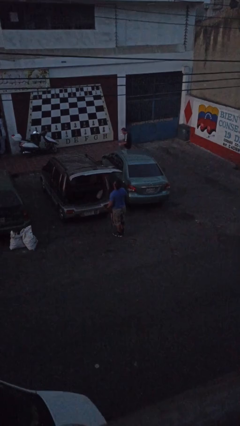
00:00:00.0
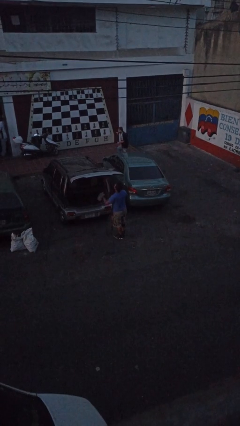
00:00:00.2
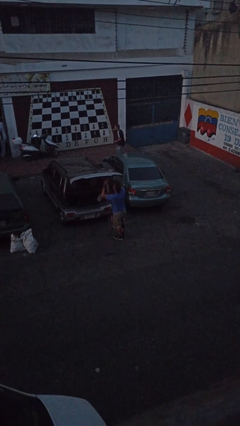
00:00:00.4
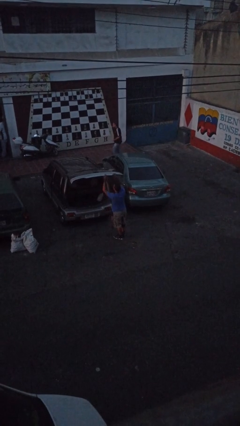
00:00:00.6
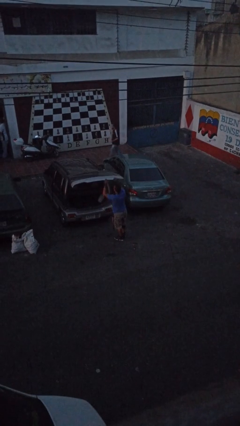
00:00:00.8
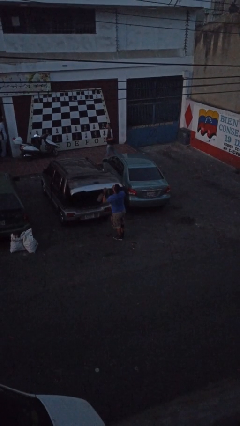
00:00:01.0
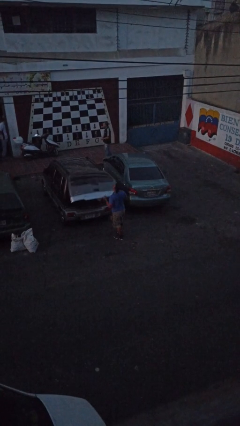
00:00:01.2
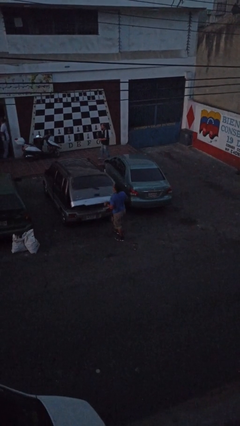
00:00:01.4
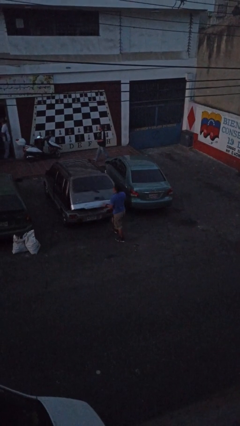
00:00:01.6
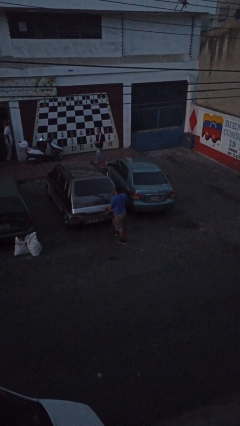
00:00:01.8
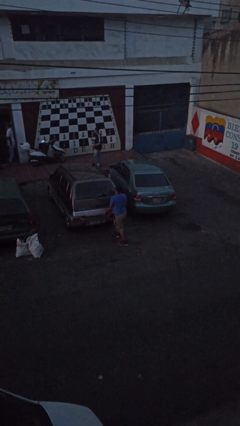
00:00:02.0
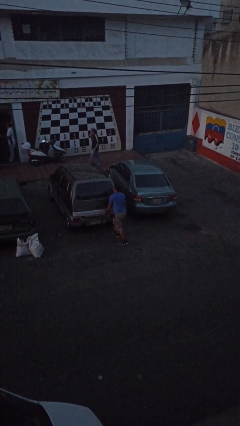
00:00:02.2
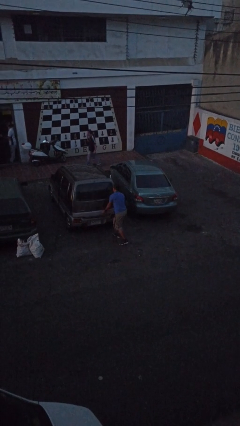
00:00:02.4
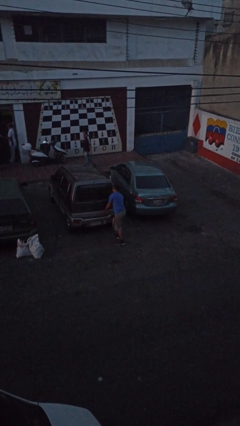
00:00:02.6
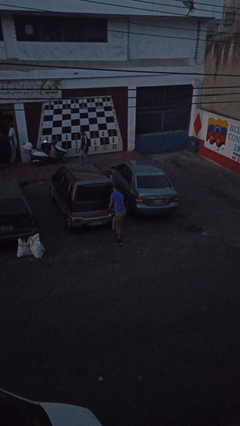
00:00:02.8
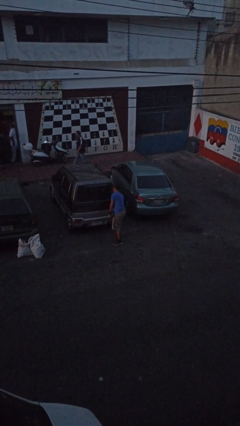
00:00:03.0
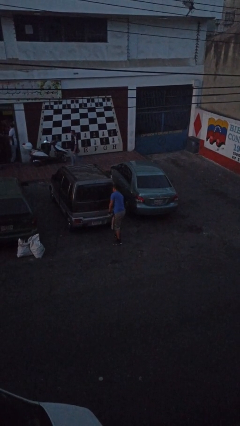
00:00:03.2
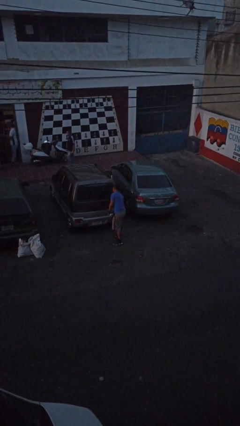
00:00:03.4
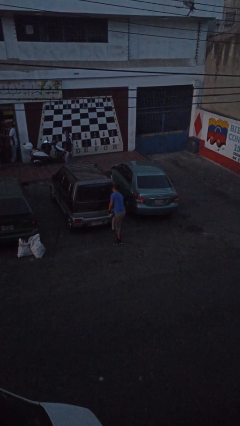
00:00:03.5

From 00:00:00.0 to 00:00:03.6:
person closes car trunk

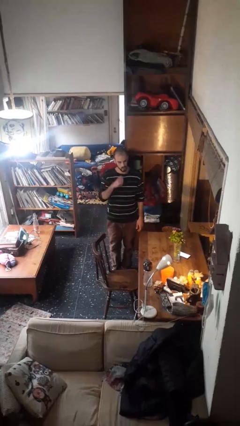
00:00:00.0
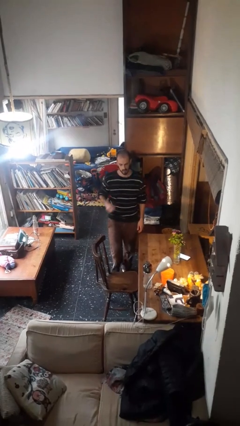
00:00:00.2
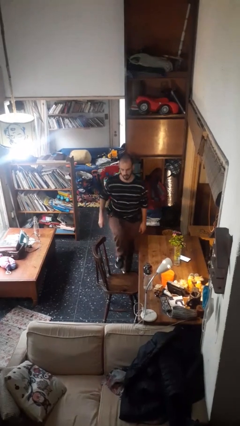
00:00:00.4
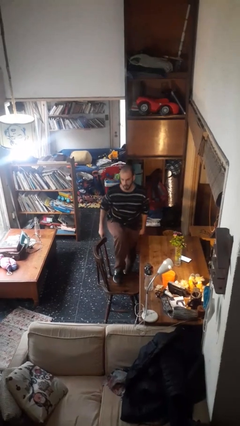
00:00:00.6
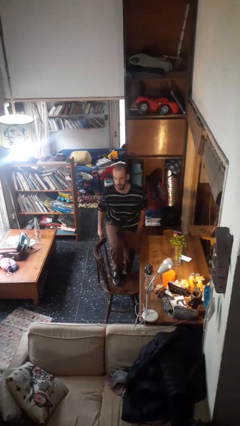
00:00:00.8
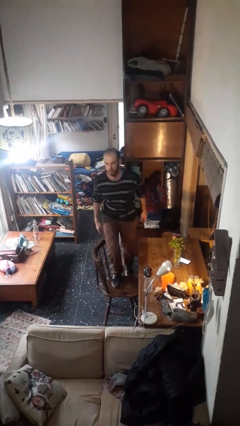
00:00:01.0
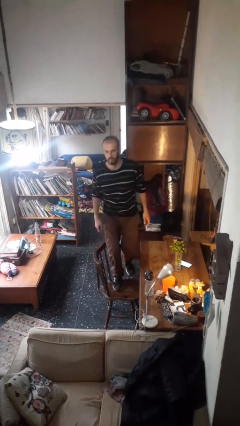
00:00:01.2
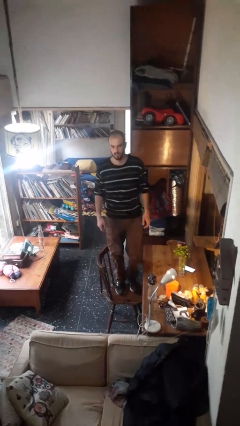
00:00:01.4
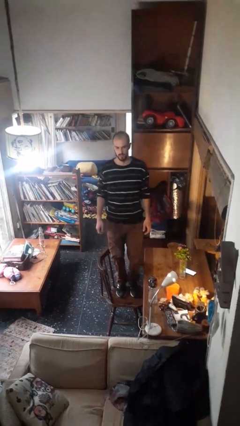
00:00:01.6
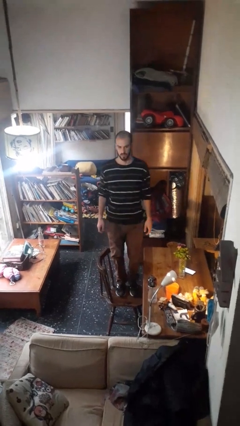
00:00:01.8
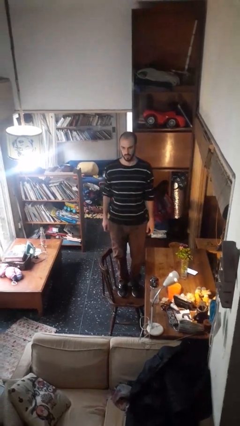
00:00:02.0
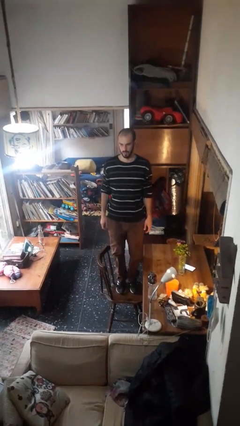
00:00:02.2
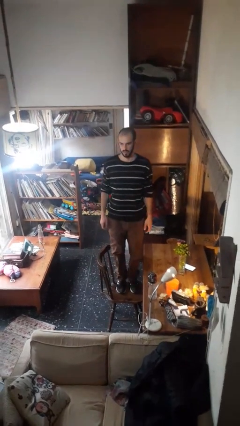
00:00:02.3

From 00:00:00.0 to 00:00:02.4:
person climbs on chair

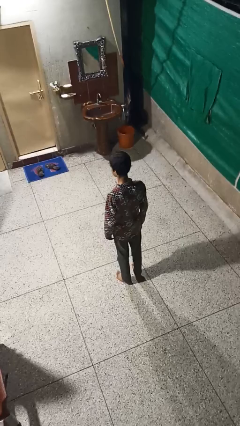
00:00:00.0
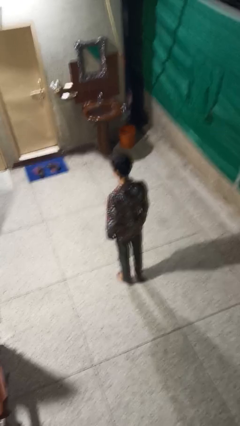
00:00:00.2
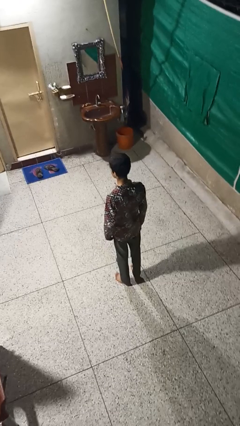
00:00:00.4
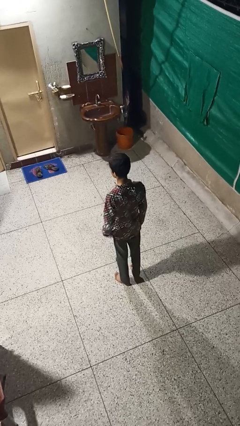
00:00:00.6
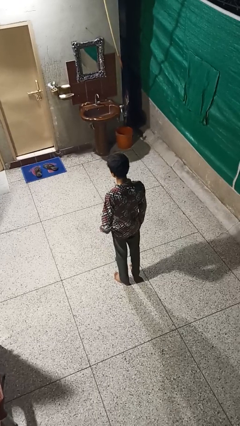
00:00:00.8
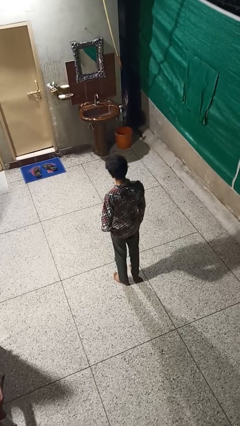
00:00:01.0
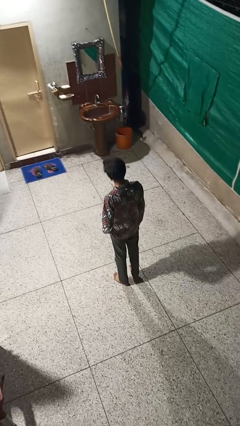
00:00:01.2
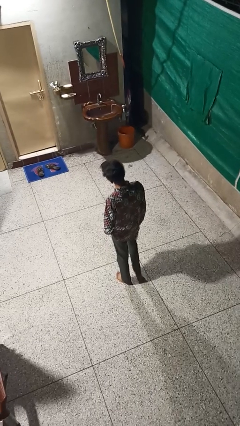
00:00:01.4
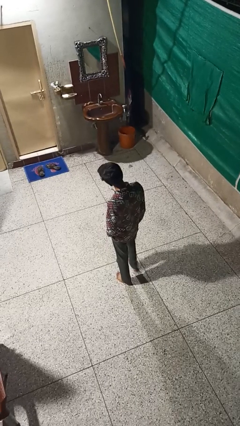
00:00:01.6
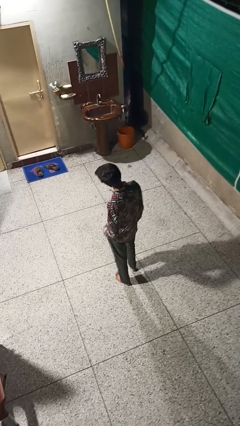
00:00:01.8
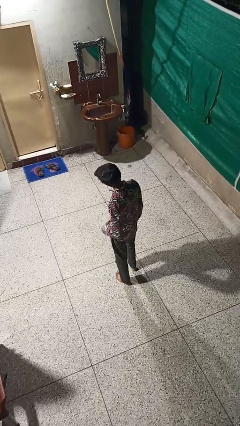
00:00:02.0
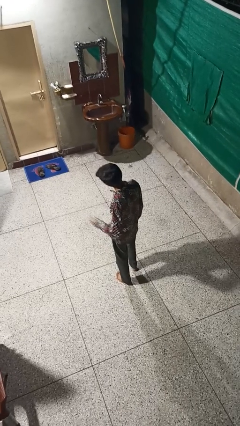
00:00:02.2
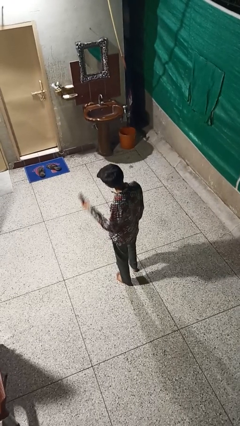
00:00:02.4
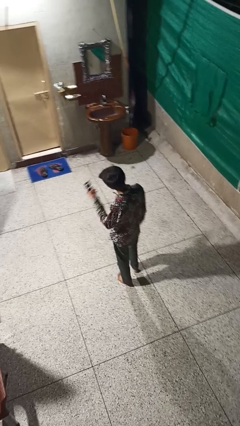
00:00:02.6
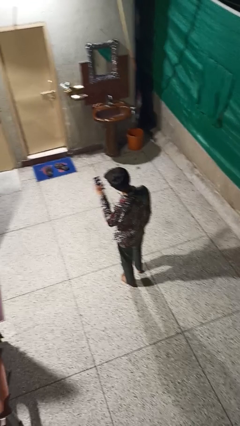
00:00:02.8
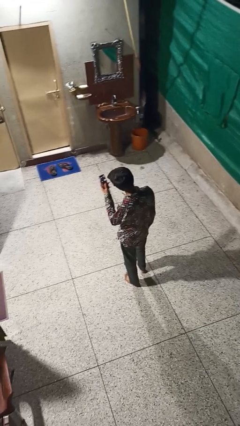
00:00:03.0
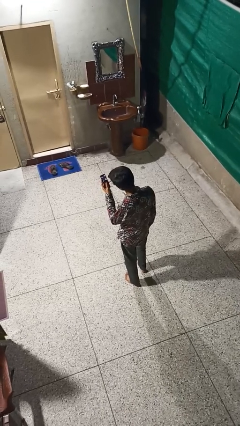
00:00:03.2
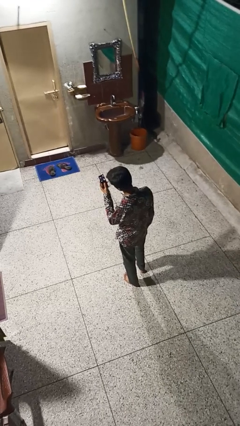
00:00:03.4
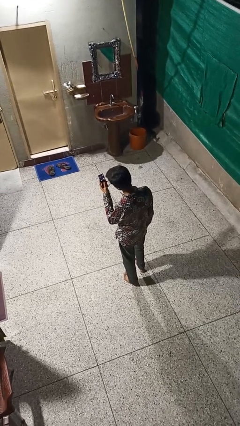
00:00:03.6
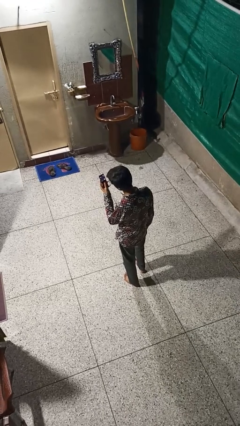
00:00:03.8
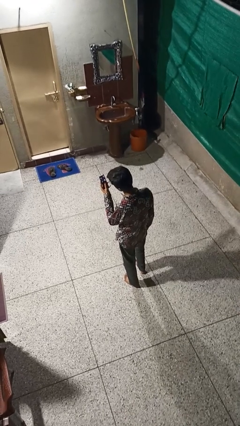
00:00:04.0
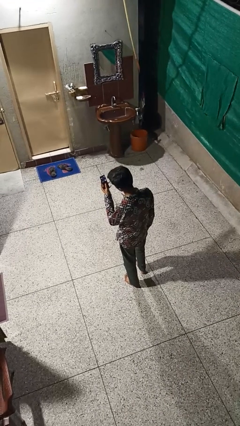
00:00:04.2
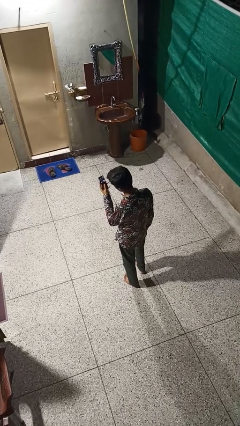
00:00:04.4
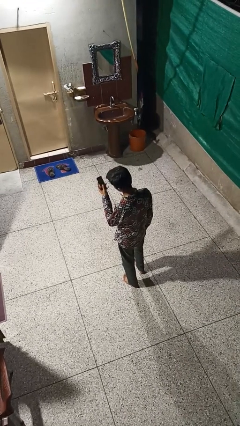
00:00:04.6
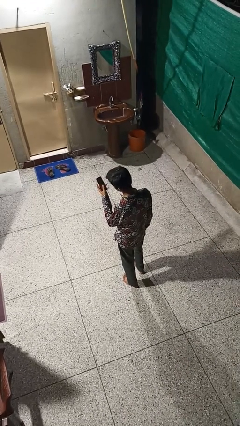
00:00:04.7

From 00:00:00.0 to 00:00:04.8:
person takes phone from pocket

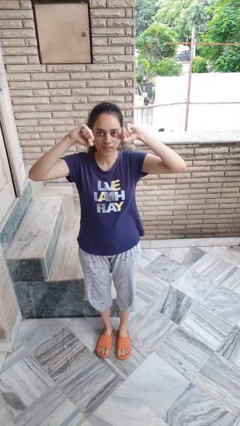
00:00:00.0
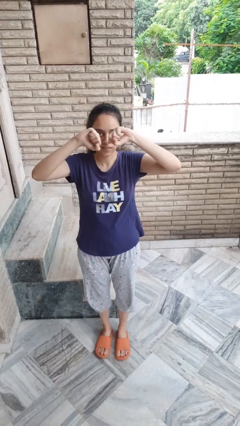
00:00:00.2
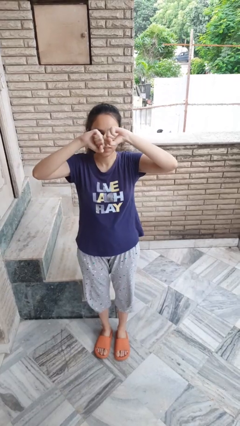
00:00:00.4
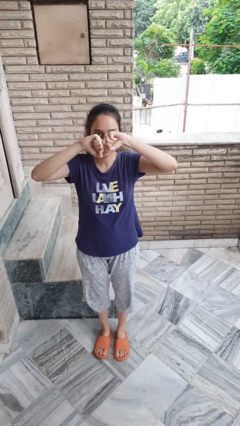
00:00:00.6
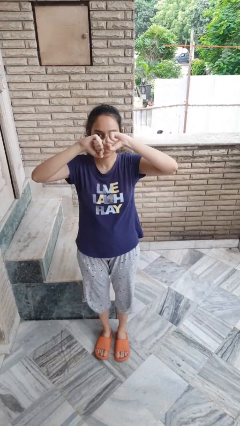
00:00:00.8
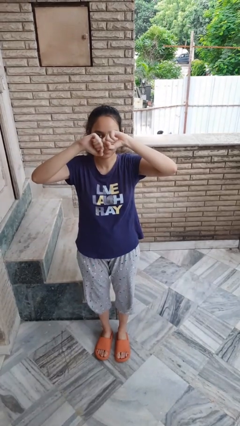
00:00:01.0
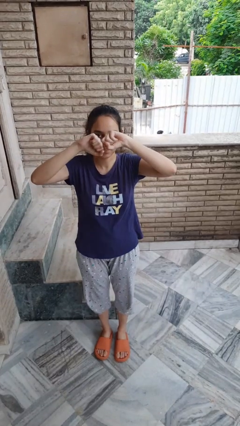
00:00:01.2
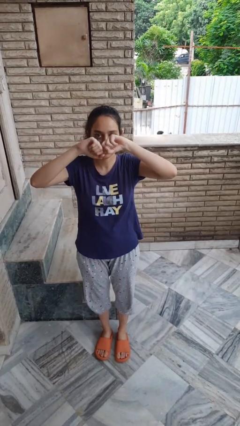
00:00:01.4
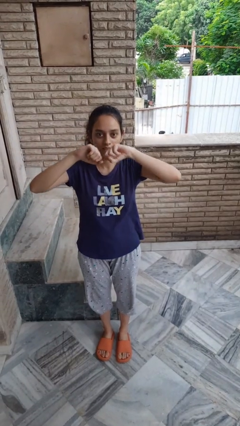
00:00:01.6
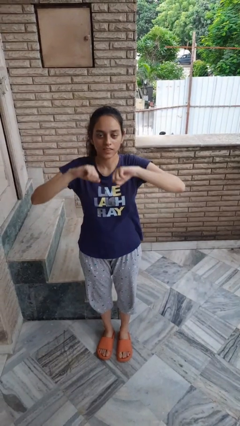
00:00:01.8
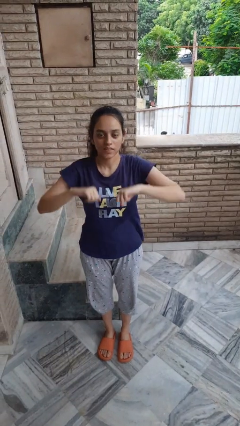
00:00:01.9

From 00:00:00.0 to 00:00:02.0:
person gestures zoom in

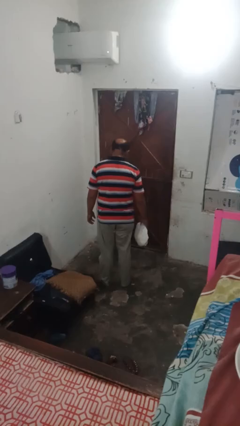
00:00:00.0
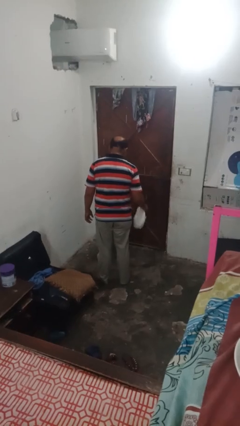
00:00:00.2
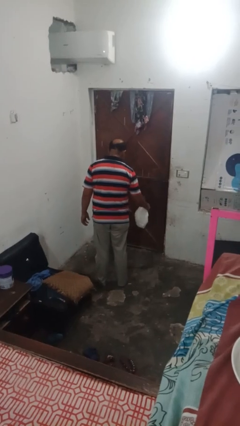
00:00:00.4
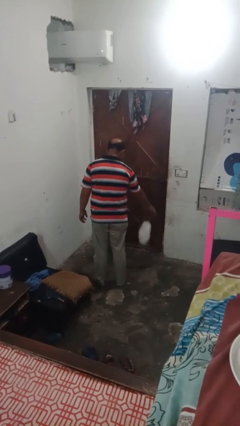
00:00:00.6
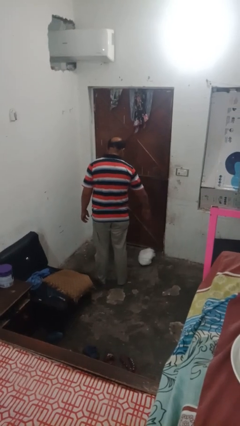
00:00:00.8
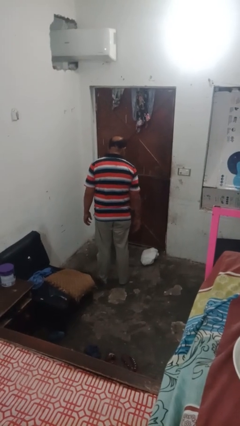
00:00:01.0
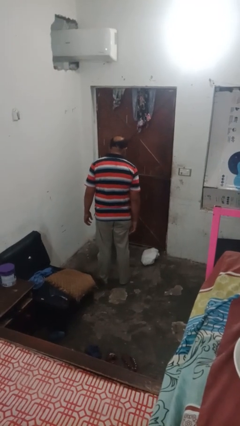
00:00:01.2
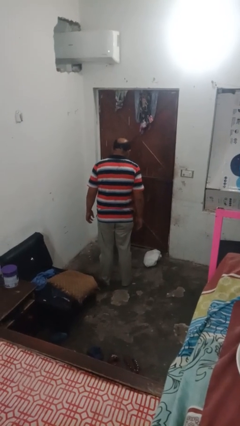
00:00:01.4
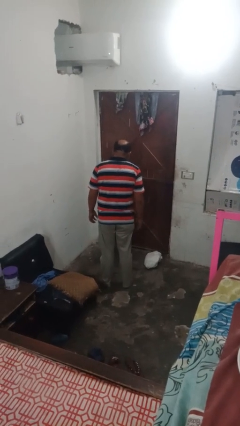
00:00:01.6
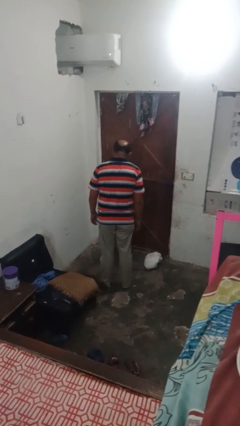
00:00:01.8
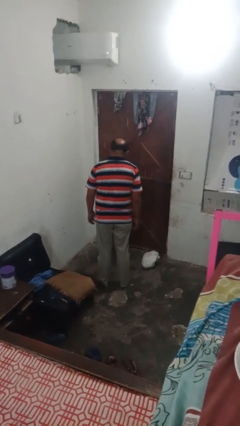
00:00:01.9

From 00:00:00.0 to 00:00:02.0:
person throws object to ground

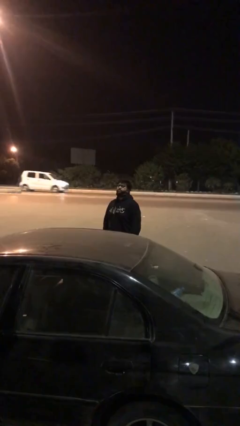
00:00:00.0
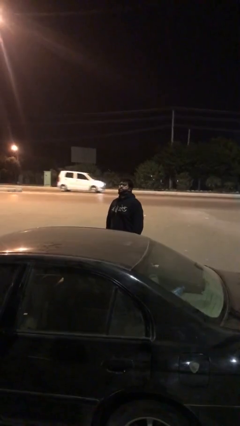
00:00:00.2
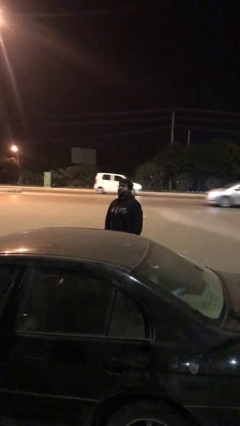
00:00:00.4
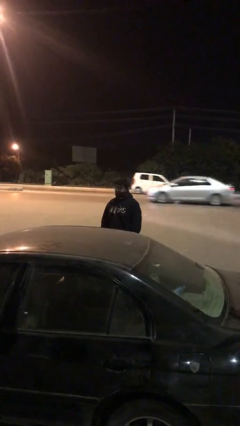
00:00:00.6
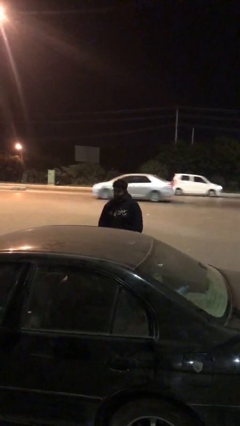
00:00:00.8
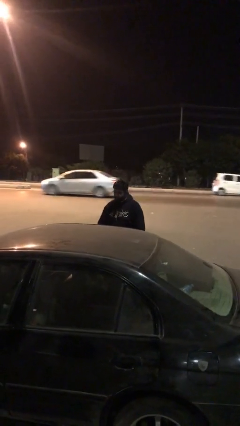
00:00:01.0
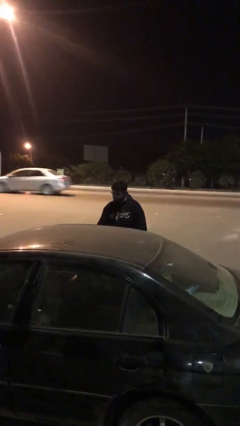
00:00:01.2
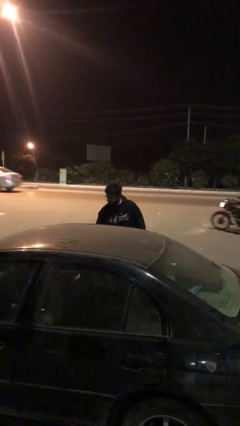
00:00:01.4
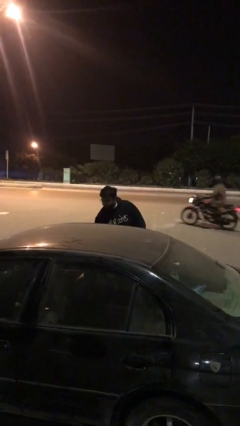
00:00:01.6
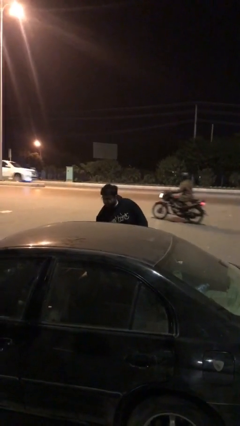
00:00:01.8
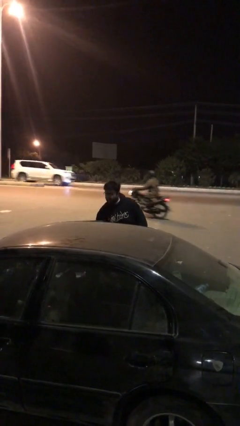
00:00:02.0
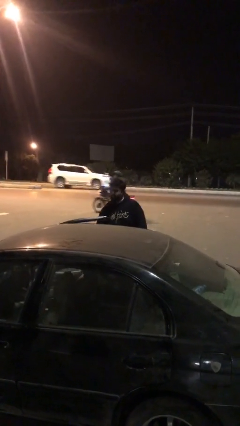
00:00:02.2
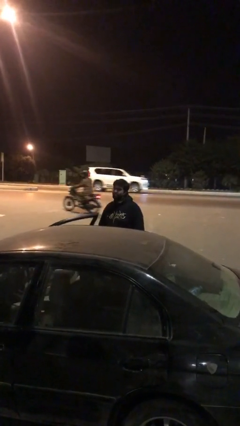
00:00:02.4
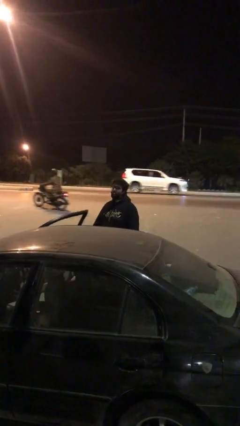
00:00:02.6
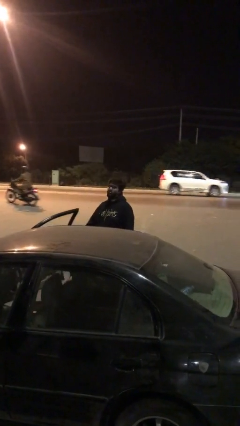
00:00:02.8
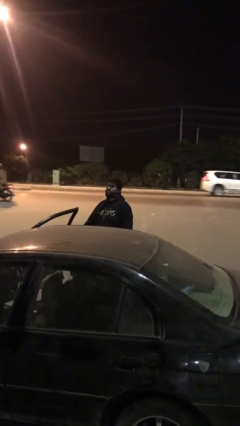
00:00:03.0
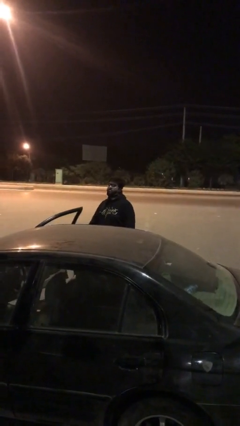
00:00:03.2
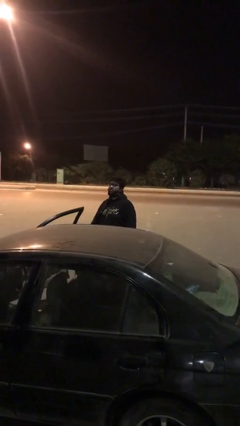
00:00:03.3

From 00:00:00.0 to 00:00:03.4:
person opens car door
